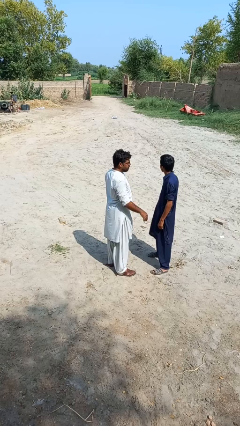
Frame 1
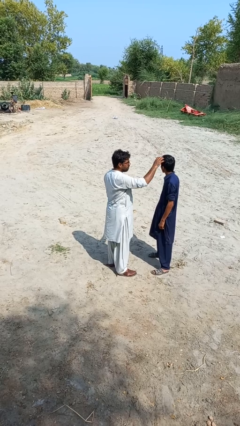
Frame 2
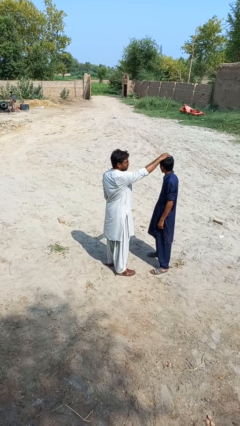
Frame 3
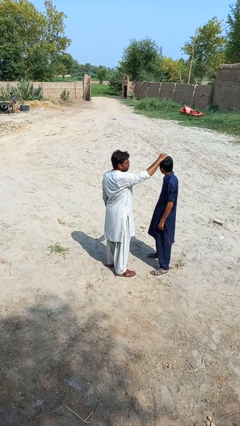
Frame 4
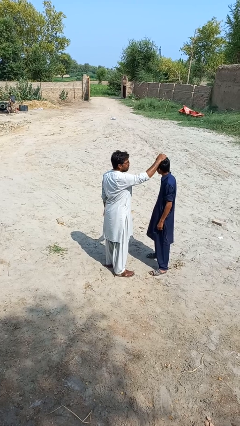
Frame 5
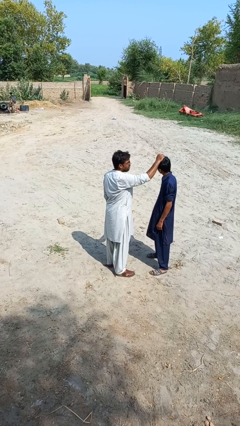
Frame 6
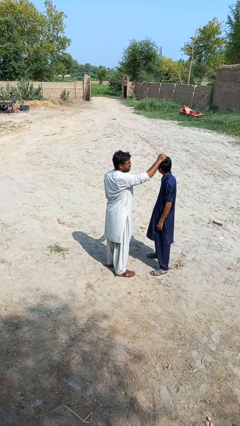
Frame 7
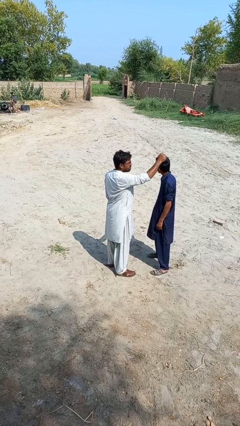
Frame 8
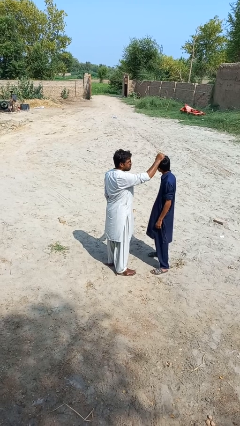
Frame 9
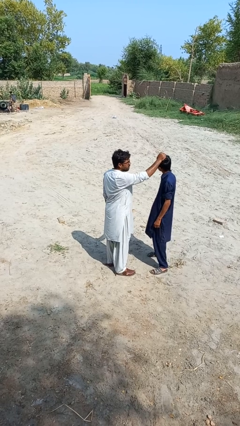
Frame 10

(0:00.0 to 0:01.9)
person grabs person by hair

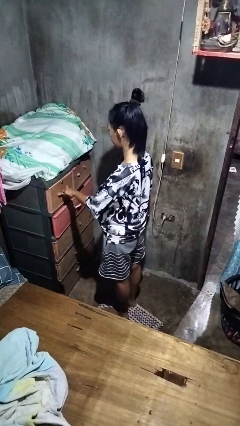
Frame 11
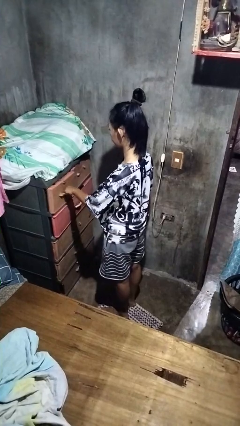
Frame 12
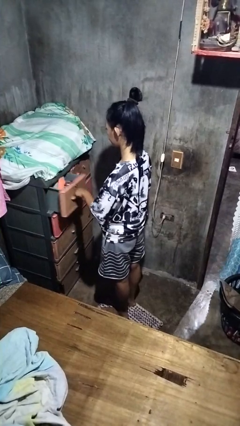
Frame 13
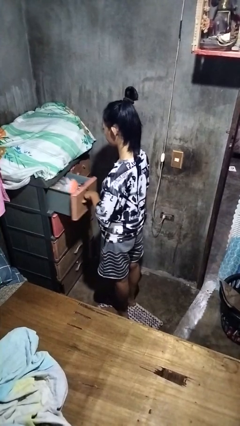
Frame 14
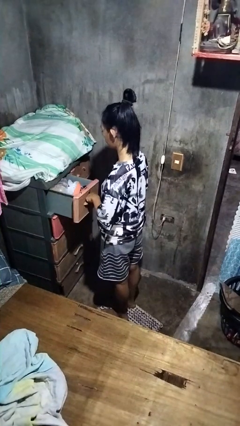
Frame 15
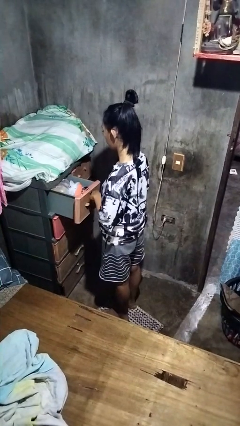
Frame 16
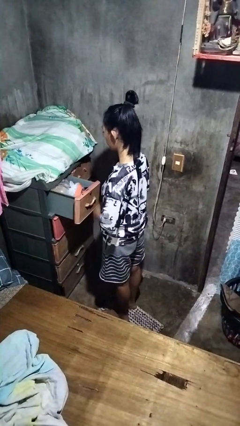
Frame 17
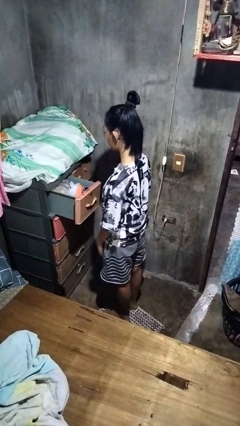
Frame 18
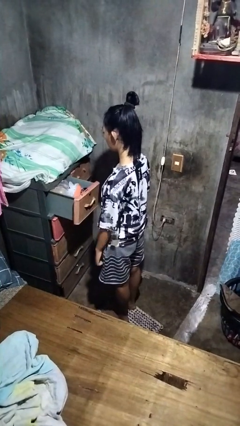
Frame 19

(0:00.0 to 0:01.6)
person opens dresser drawer

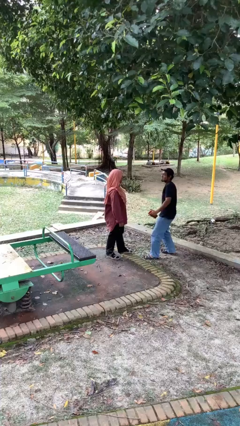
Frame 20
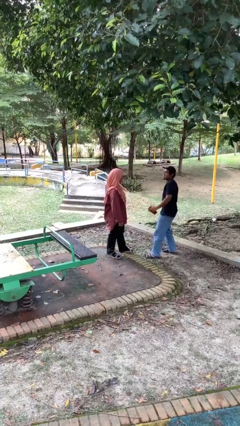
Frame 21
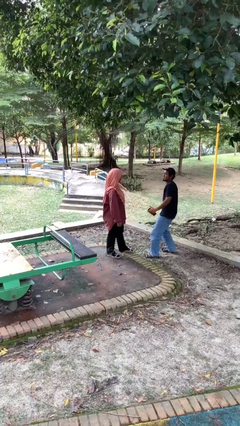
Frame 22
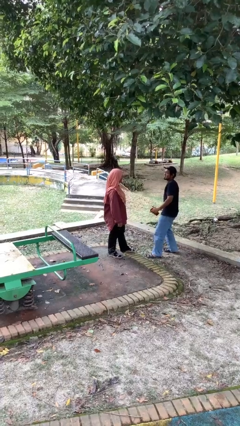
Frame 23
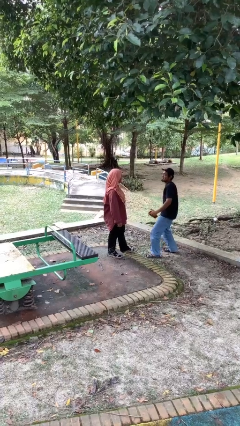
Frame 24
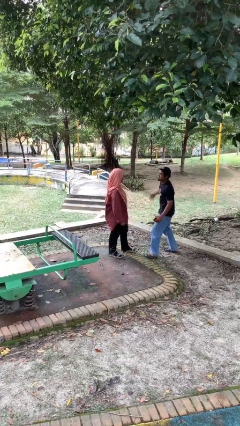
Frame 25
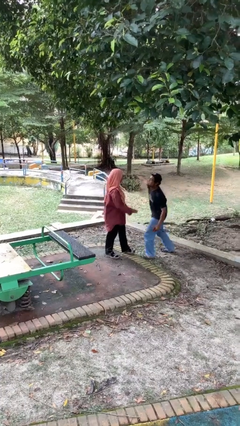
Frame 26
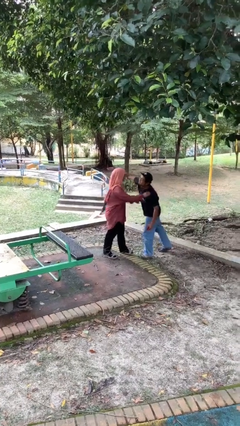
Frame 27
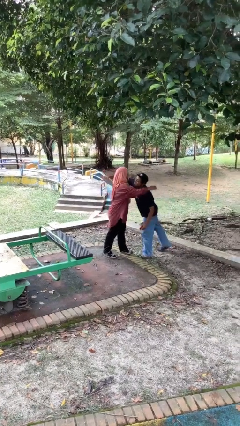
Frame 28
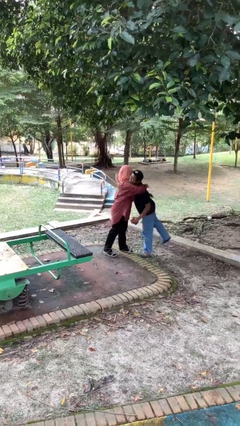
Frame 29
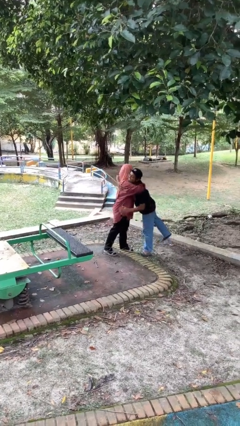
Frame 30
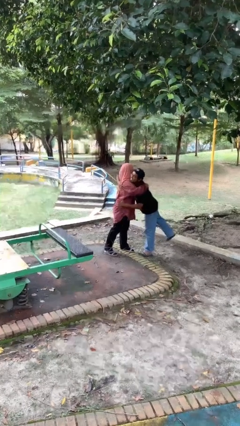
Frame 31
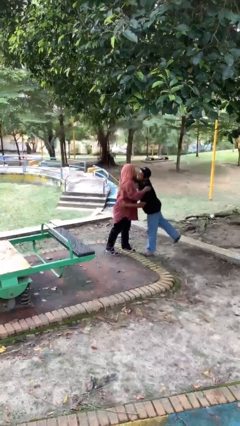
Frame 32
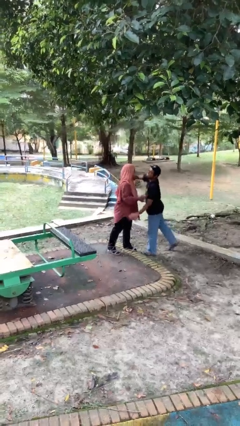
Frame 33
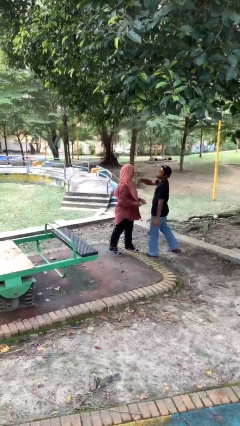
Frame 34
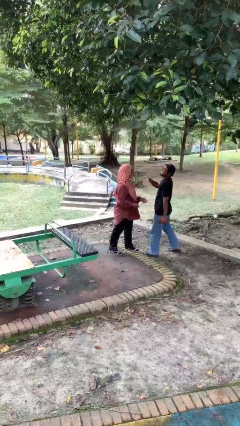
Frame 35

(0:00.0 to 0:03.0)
person embraces person

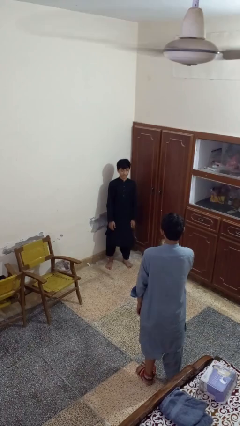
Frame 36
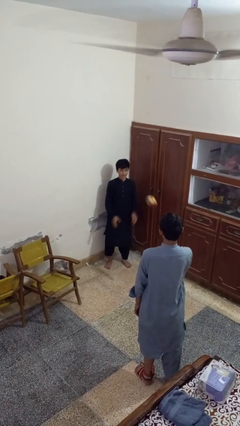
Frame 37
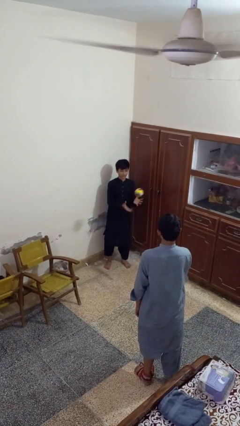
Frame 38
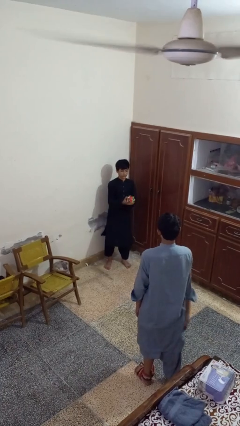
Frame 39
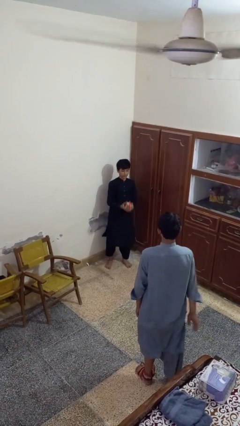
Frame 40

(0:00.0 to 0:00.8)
person catches object from person

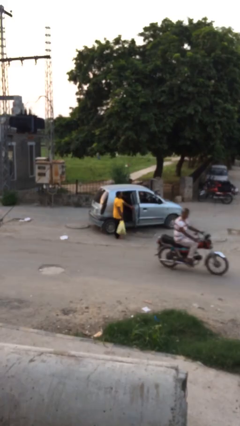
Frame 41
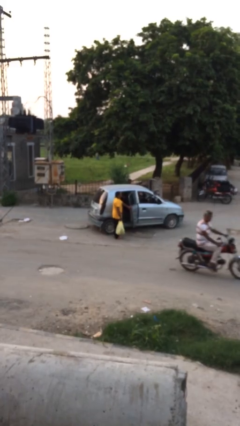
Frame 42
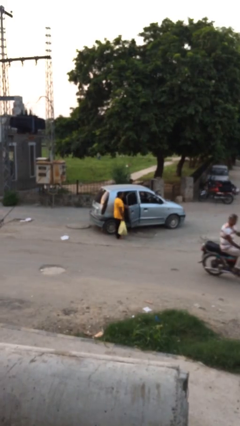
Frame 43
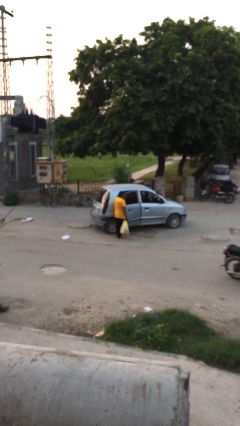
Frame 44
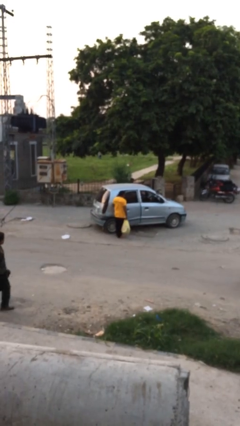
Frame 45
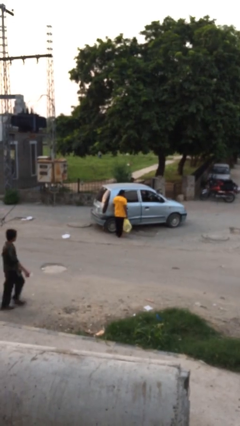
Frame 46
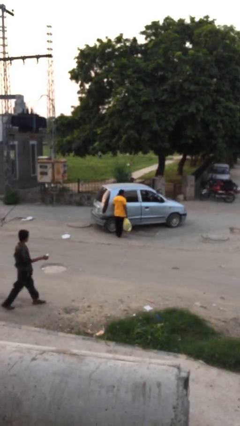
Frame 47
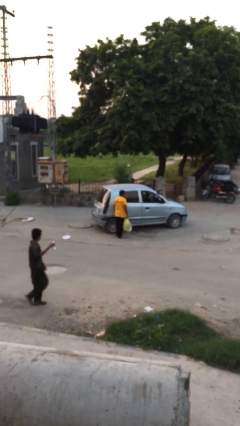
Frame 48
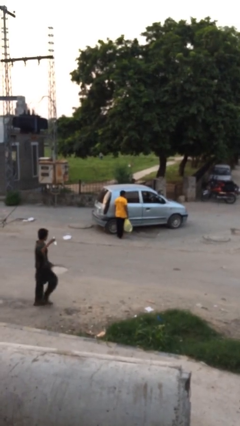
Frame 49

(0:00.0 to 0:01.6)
person closes car door

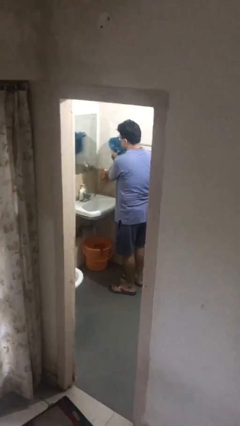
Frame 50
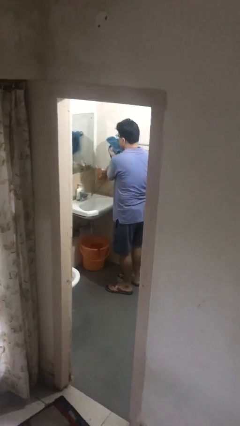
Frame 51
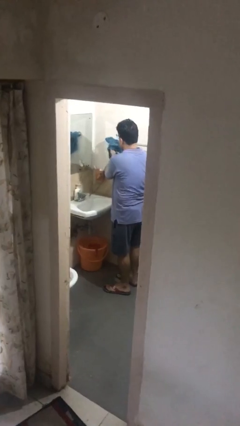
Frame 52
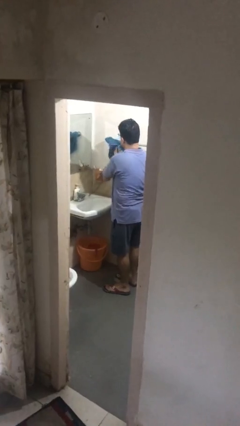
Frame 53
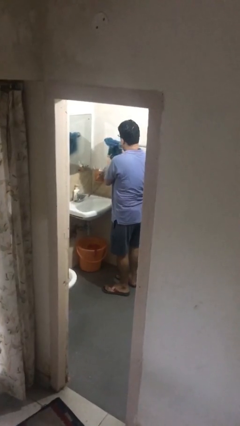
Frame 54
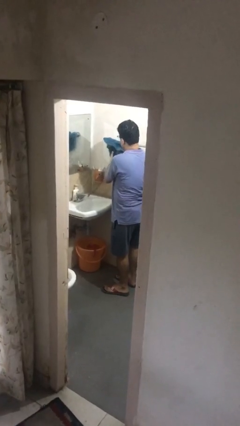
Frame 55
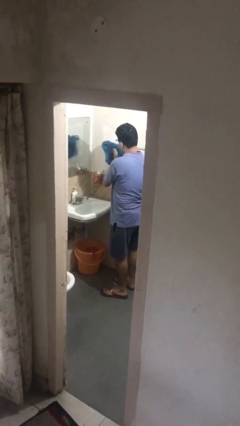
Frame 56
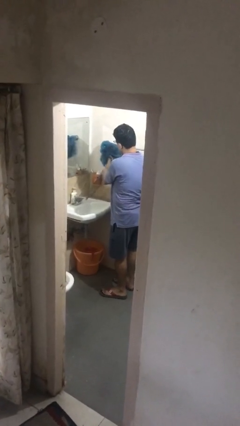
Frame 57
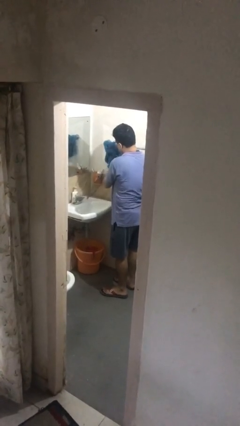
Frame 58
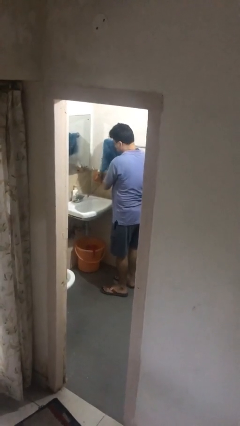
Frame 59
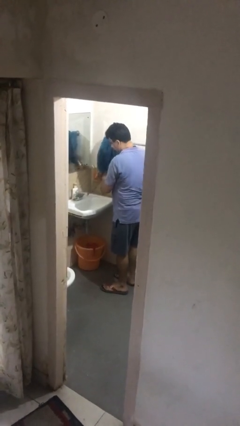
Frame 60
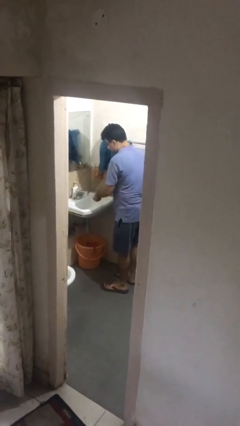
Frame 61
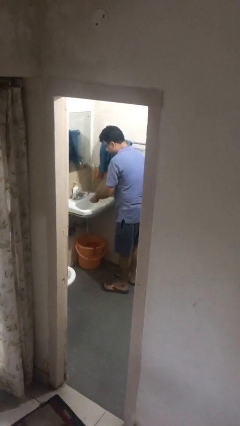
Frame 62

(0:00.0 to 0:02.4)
person dries hands with towel

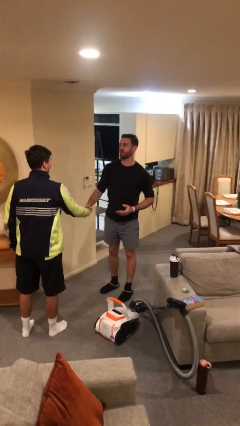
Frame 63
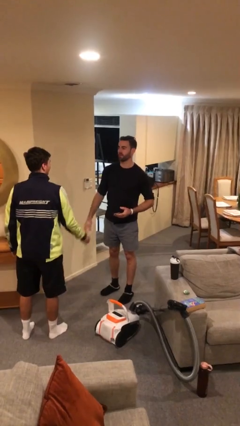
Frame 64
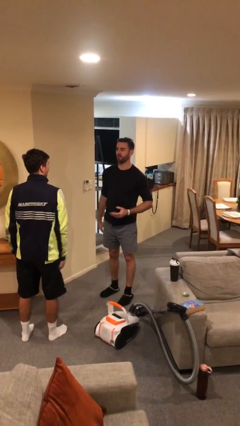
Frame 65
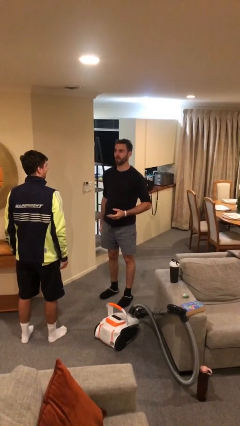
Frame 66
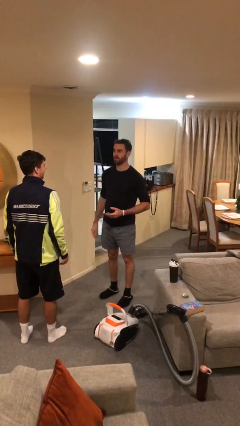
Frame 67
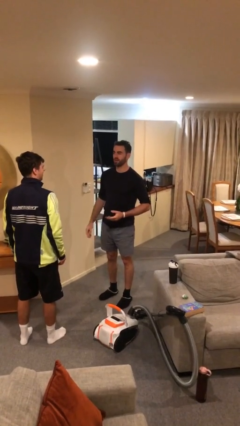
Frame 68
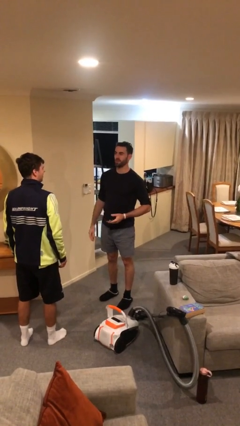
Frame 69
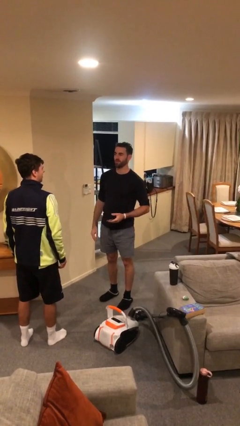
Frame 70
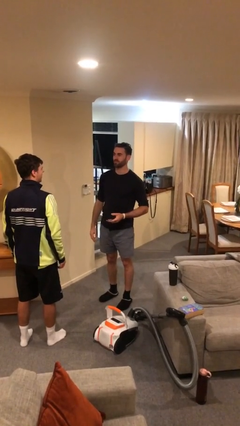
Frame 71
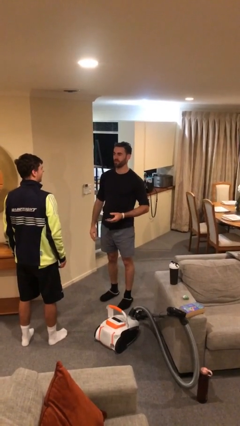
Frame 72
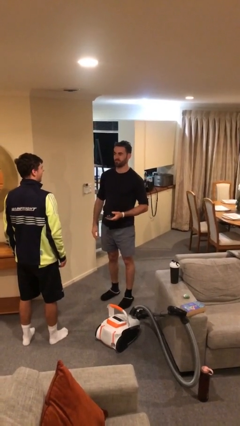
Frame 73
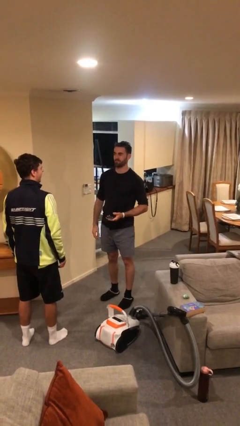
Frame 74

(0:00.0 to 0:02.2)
person talks to person

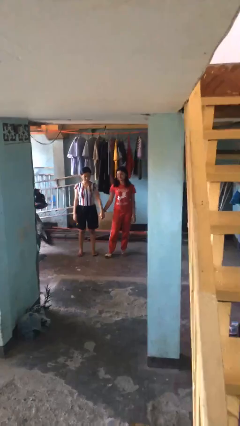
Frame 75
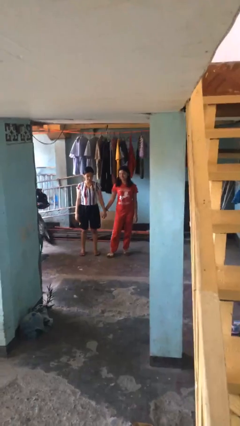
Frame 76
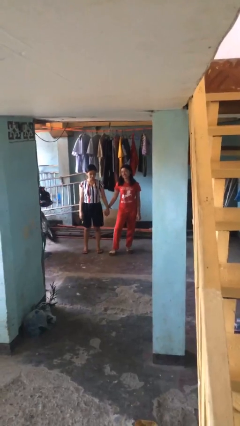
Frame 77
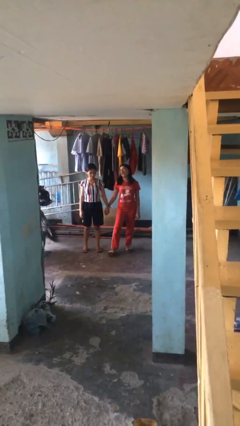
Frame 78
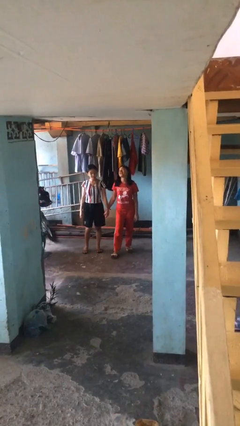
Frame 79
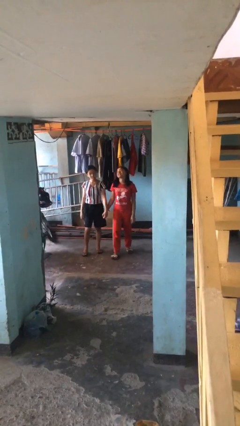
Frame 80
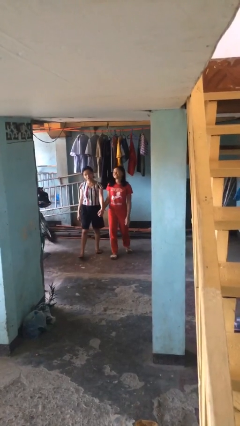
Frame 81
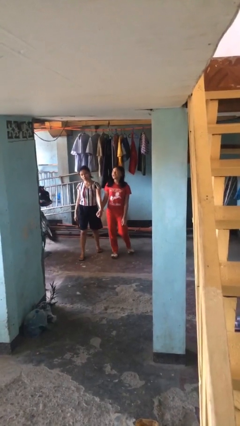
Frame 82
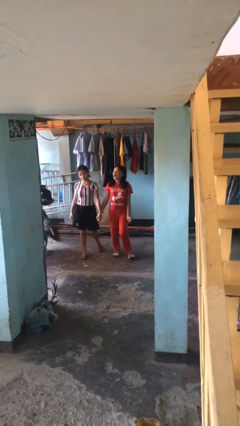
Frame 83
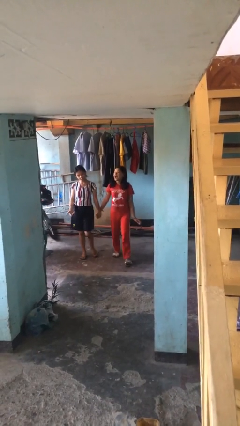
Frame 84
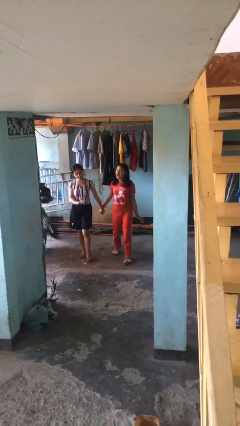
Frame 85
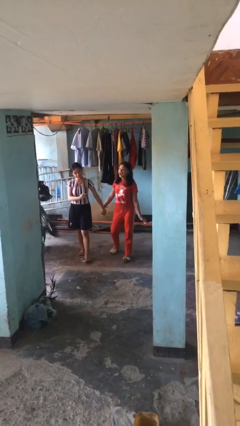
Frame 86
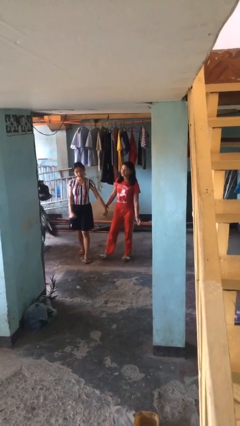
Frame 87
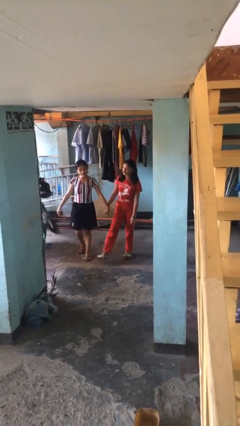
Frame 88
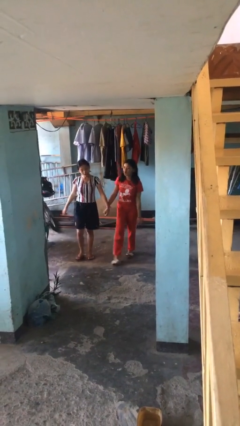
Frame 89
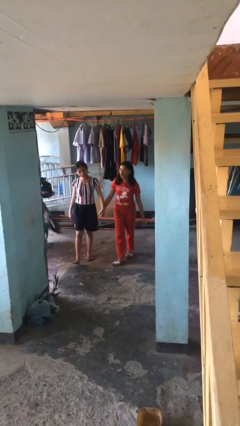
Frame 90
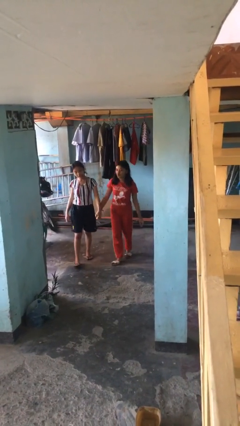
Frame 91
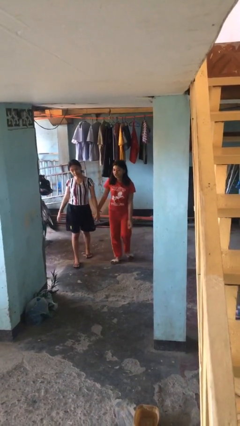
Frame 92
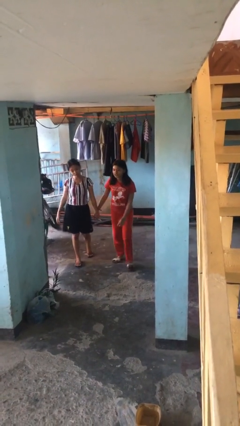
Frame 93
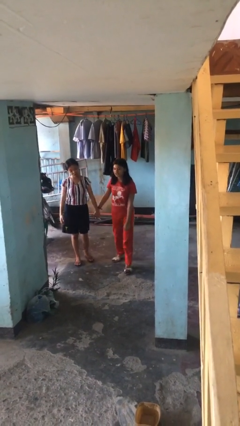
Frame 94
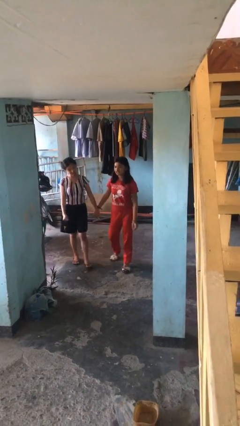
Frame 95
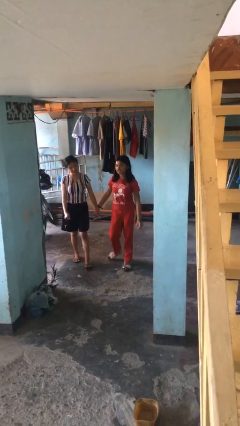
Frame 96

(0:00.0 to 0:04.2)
person holds hand
